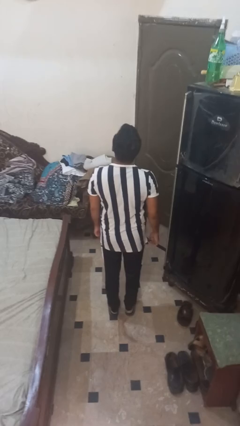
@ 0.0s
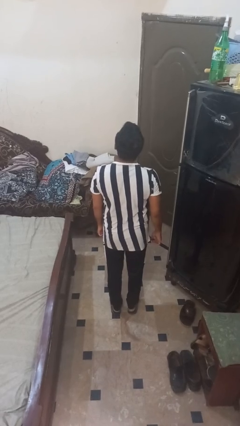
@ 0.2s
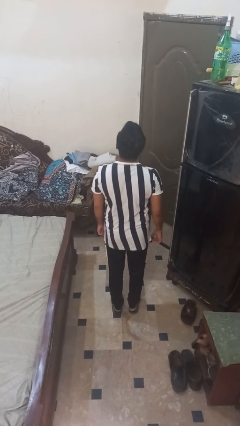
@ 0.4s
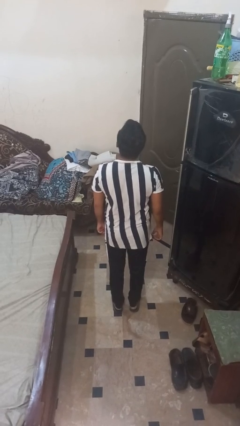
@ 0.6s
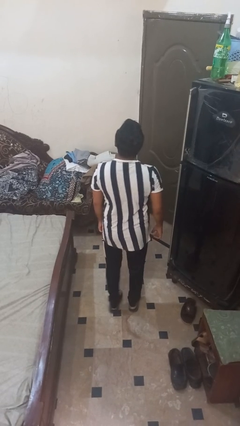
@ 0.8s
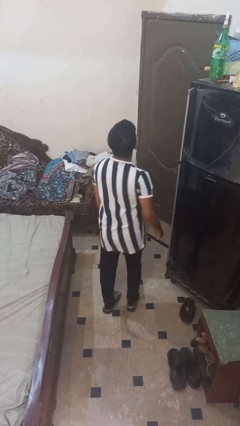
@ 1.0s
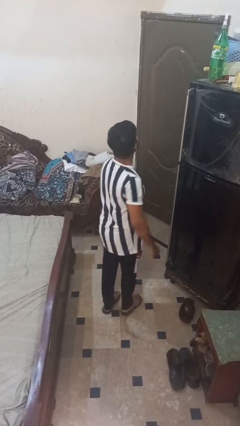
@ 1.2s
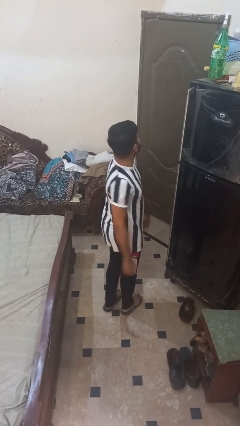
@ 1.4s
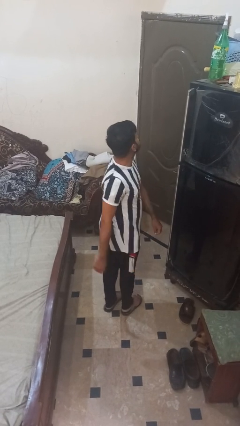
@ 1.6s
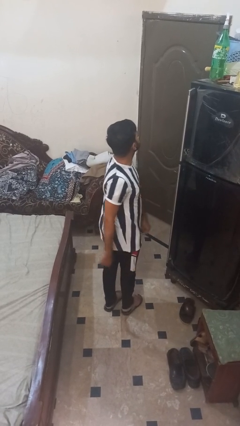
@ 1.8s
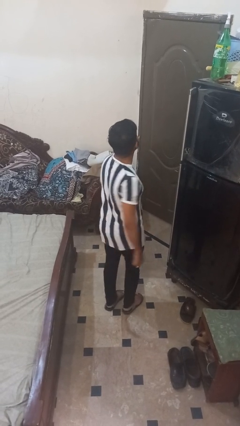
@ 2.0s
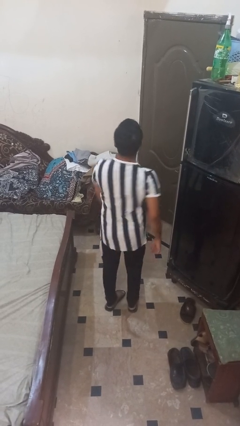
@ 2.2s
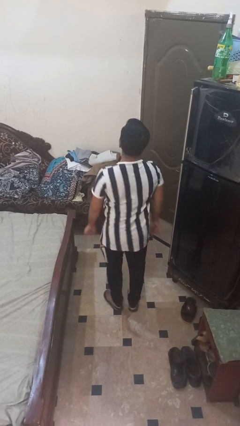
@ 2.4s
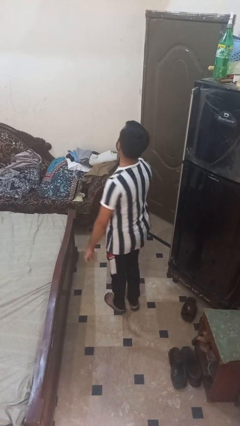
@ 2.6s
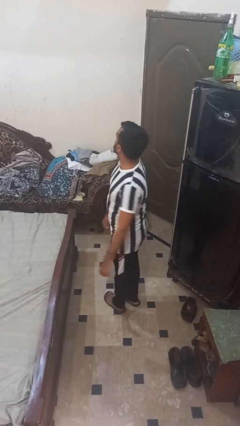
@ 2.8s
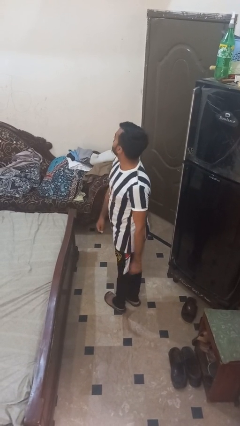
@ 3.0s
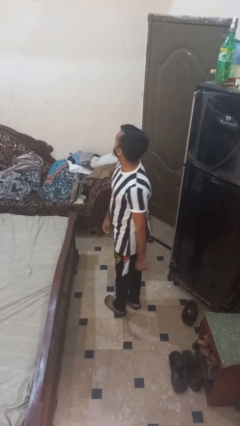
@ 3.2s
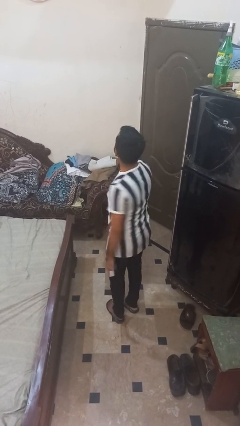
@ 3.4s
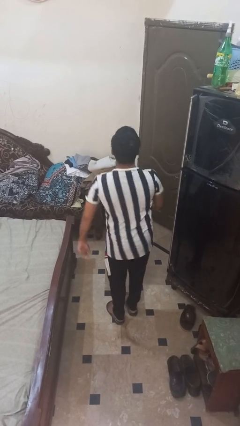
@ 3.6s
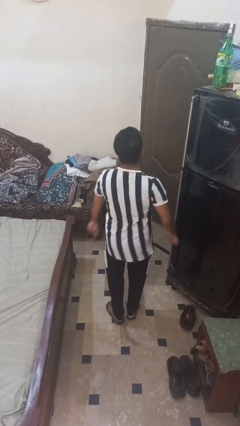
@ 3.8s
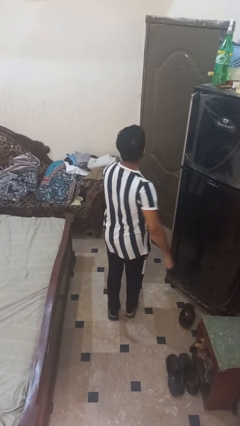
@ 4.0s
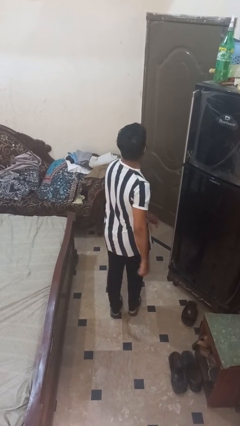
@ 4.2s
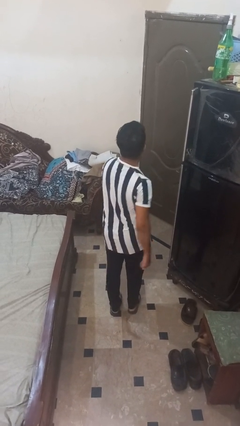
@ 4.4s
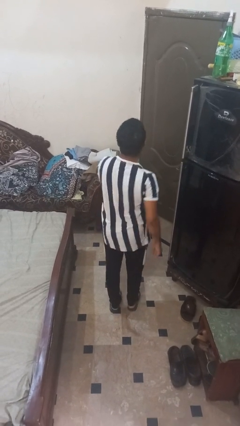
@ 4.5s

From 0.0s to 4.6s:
person twirls

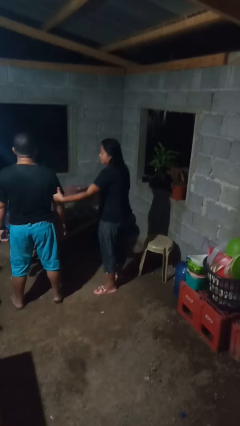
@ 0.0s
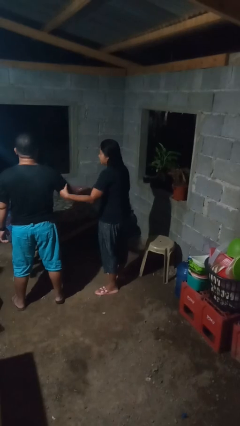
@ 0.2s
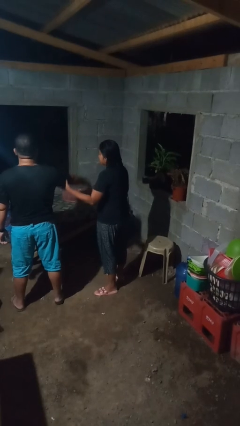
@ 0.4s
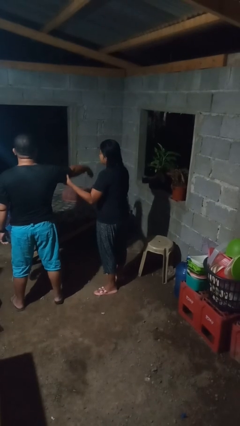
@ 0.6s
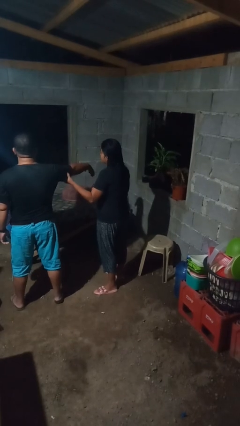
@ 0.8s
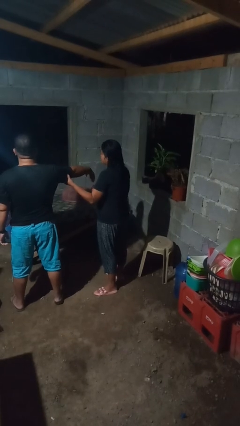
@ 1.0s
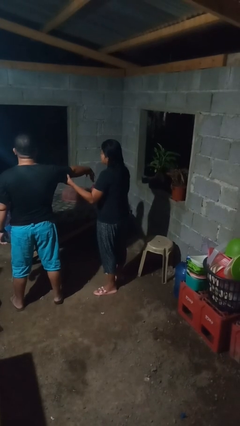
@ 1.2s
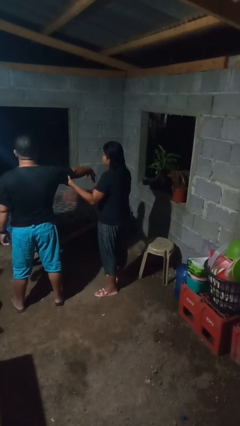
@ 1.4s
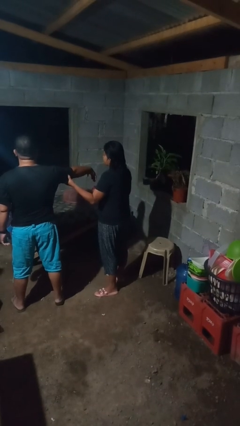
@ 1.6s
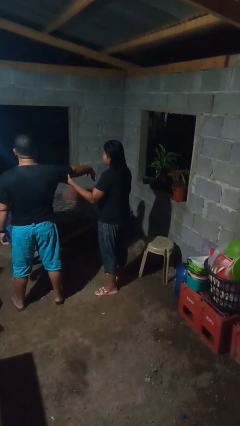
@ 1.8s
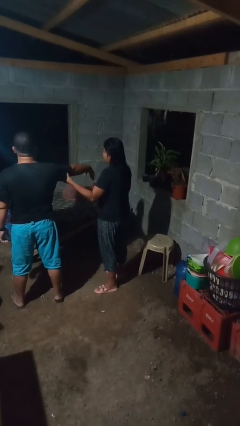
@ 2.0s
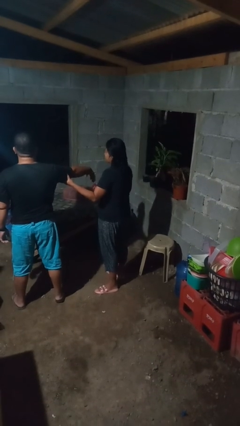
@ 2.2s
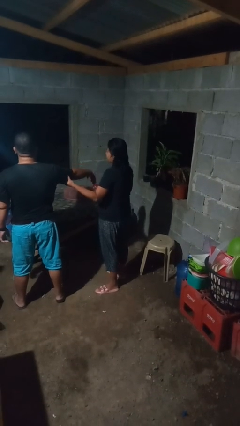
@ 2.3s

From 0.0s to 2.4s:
person grabs person by bicep

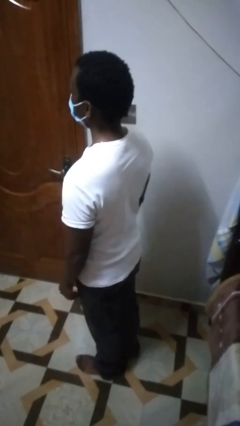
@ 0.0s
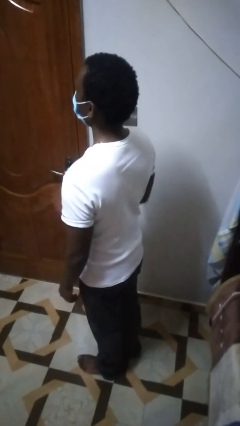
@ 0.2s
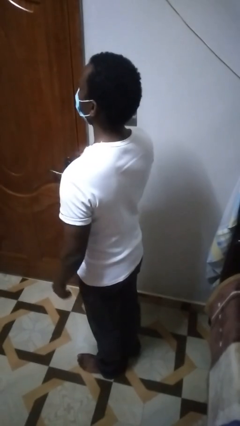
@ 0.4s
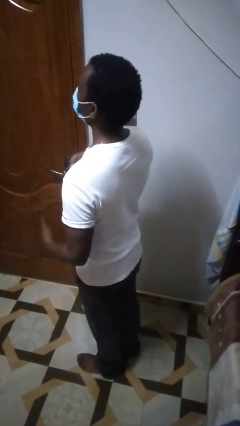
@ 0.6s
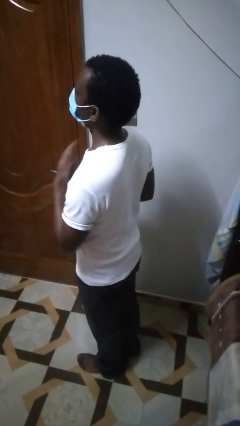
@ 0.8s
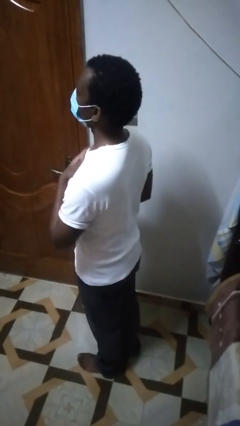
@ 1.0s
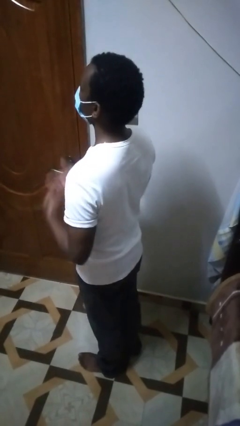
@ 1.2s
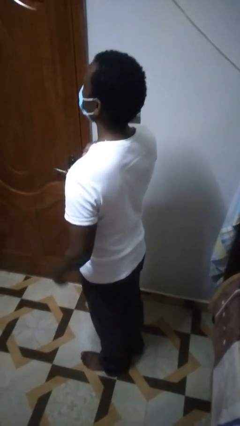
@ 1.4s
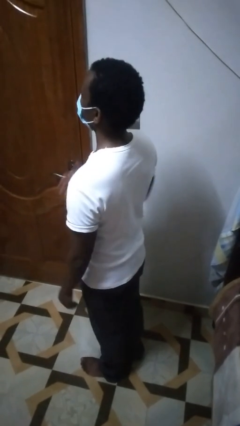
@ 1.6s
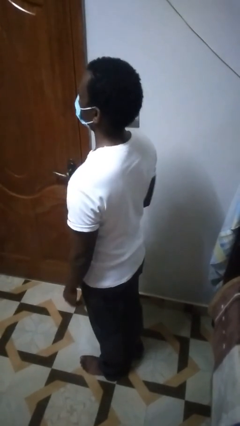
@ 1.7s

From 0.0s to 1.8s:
person drums on chest

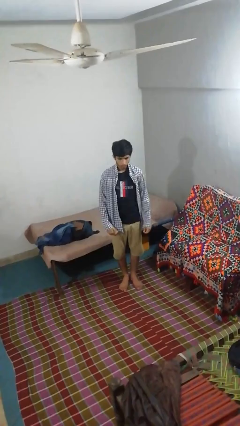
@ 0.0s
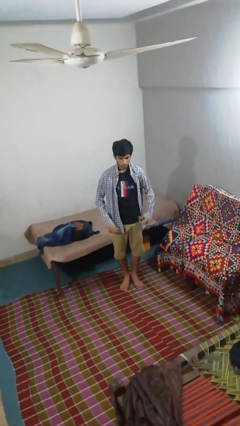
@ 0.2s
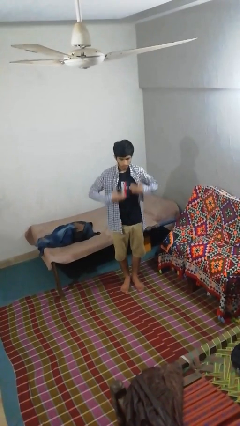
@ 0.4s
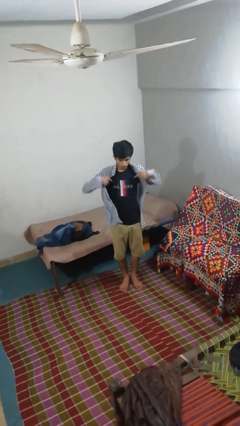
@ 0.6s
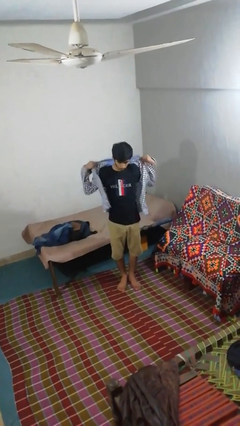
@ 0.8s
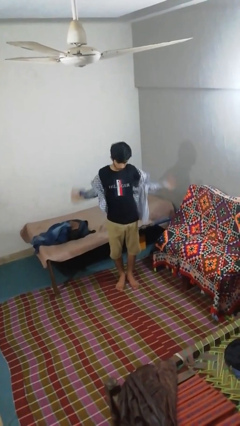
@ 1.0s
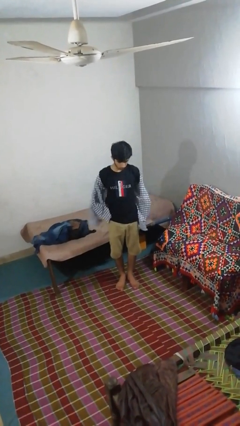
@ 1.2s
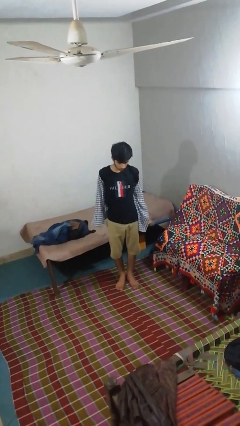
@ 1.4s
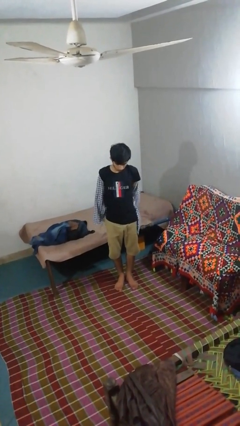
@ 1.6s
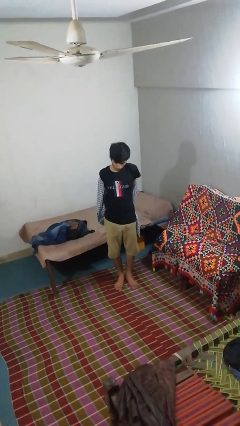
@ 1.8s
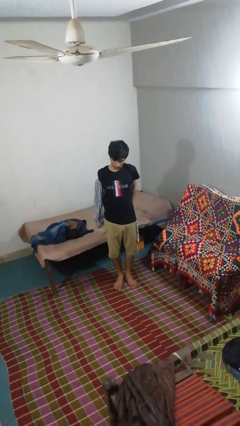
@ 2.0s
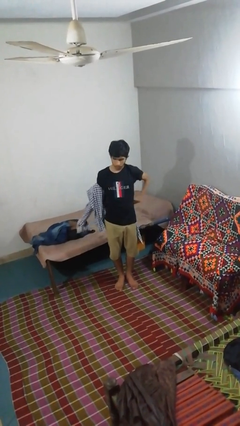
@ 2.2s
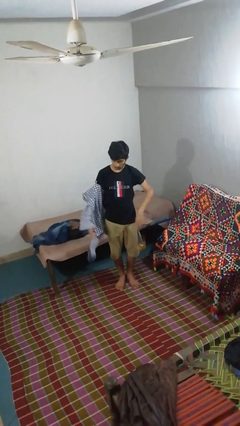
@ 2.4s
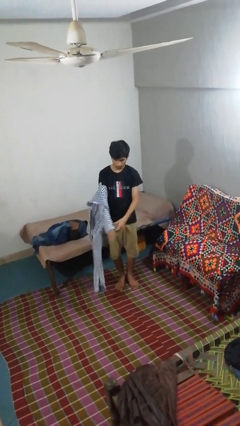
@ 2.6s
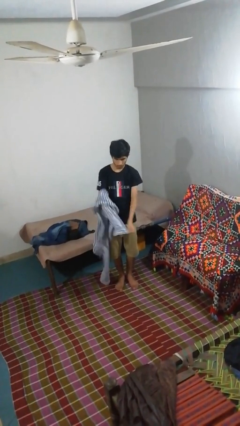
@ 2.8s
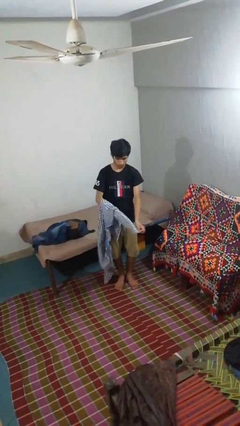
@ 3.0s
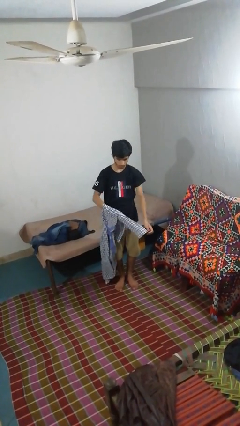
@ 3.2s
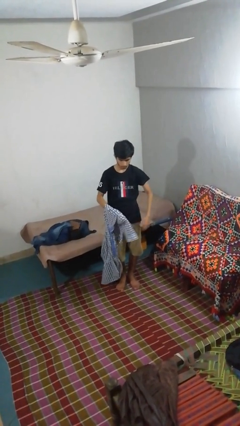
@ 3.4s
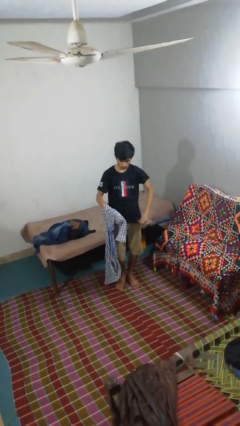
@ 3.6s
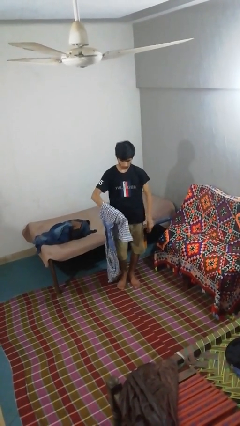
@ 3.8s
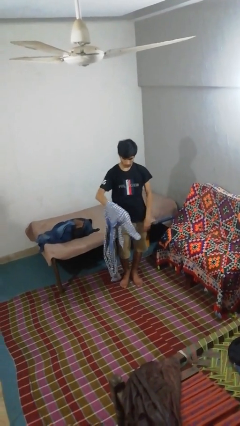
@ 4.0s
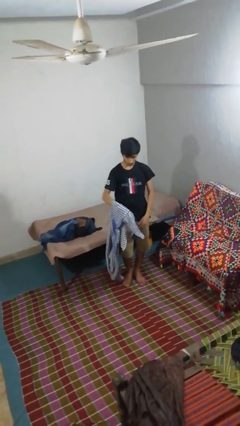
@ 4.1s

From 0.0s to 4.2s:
person takes off shirt

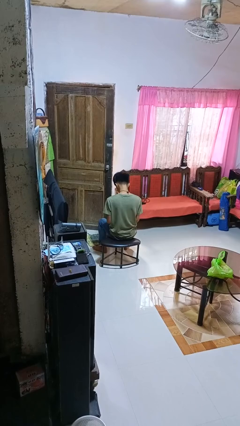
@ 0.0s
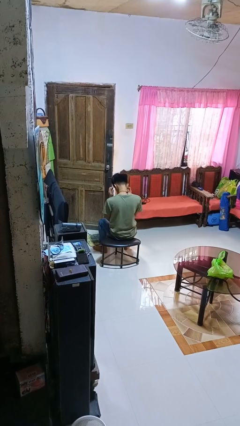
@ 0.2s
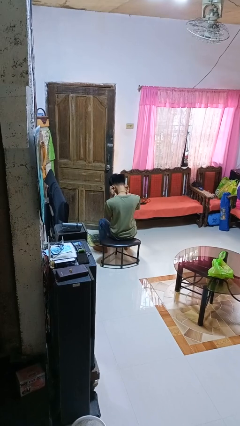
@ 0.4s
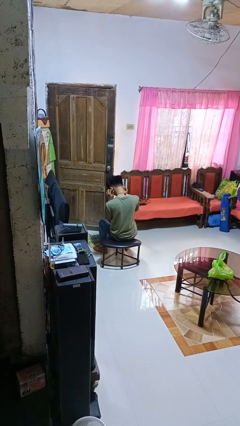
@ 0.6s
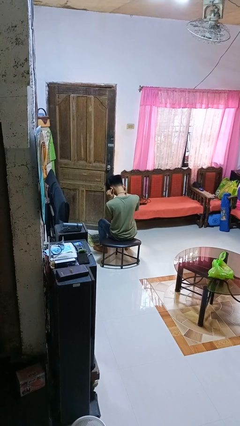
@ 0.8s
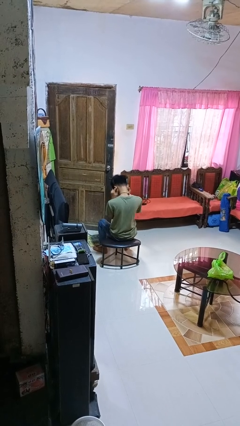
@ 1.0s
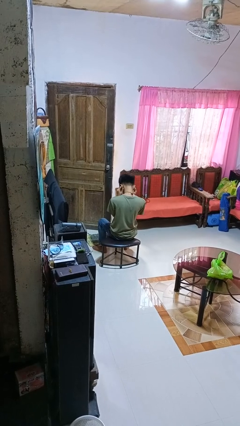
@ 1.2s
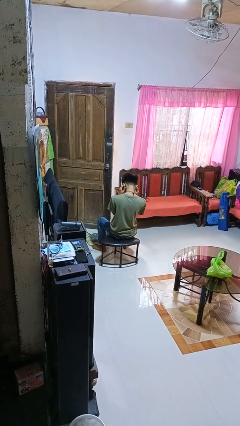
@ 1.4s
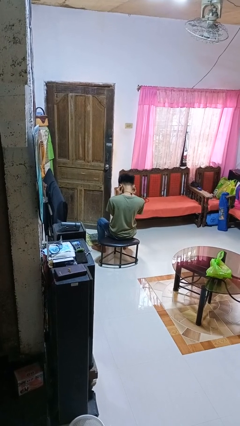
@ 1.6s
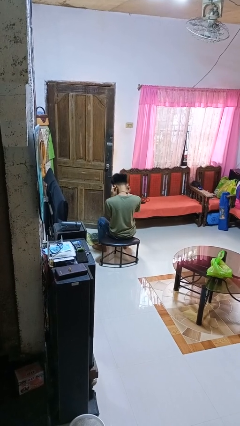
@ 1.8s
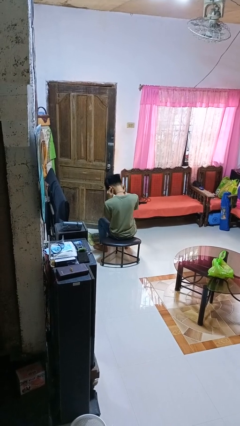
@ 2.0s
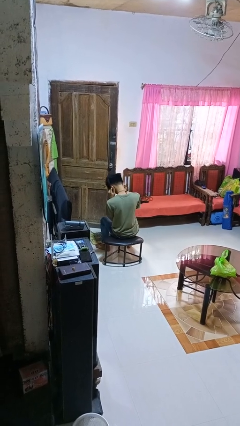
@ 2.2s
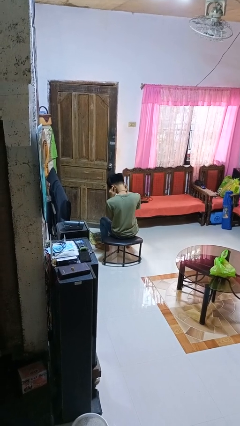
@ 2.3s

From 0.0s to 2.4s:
person puts fingers in ear

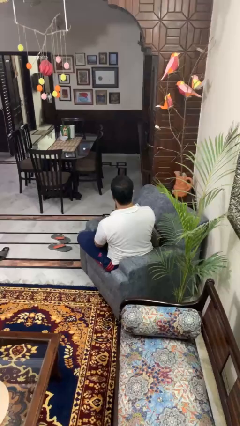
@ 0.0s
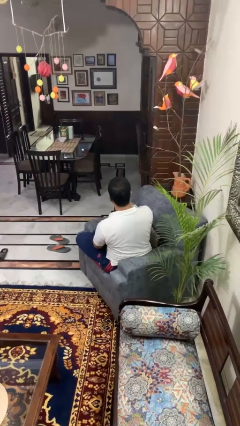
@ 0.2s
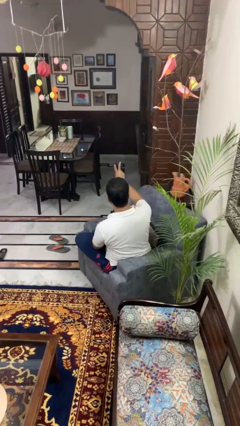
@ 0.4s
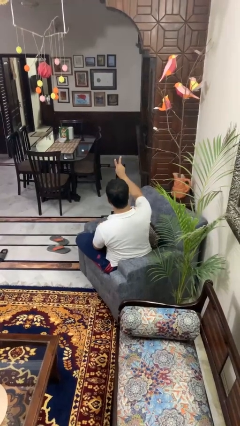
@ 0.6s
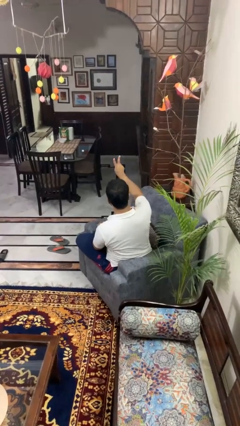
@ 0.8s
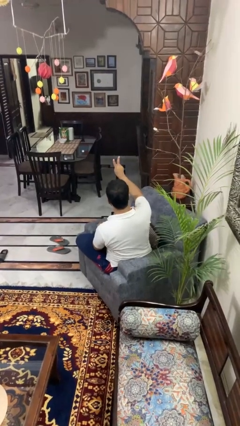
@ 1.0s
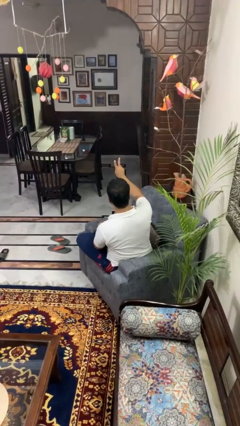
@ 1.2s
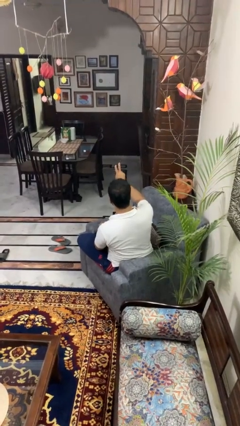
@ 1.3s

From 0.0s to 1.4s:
person gestures peace

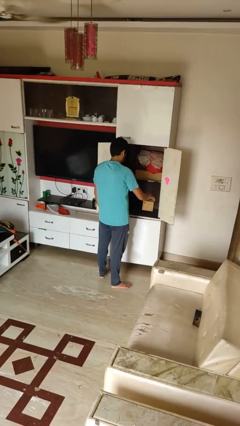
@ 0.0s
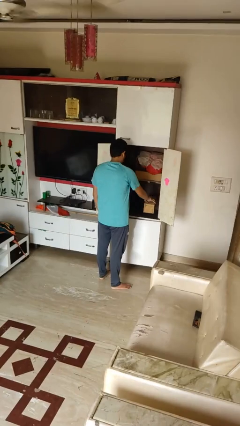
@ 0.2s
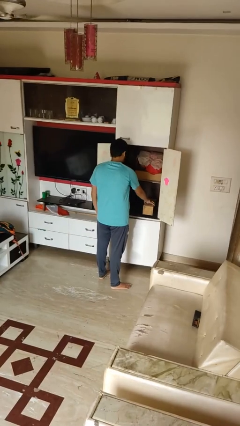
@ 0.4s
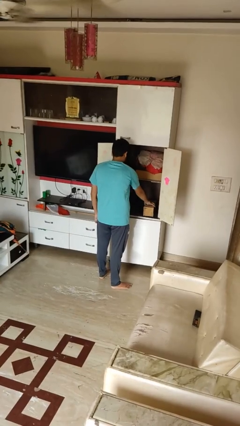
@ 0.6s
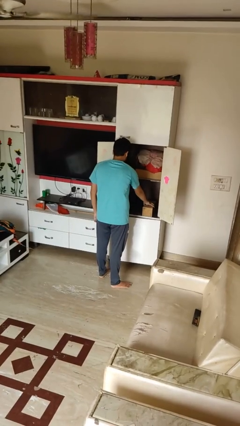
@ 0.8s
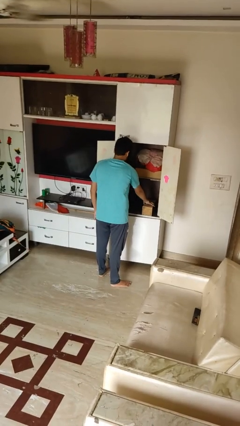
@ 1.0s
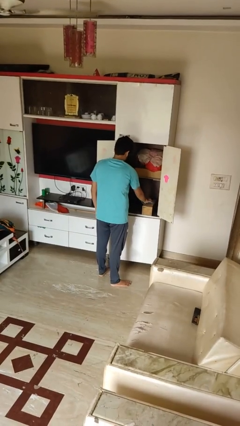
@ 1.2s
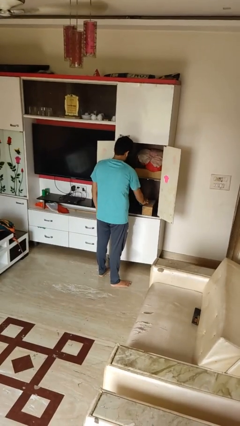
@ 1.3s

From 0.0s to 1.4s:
person puts down object into cabinet
